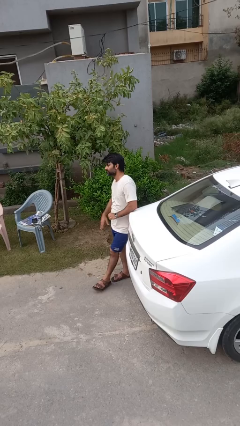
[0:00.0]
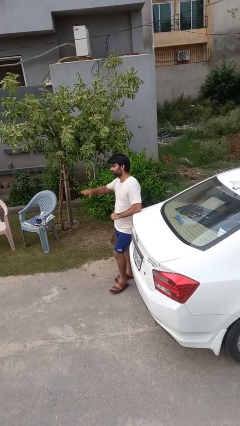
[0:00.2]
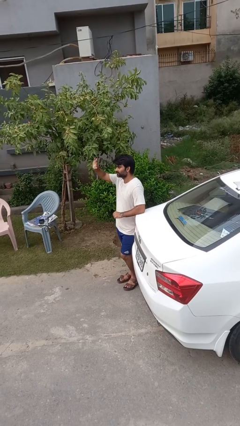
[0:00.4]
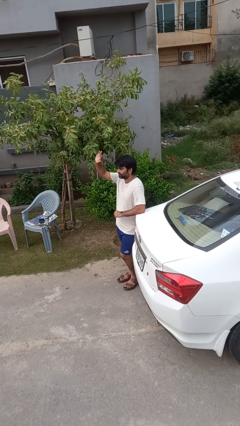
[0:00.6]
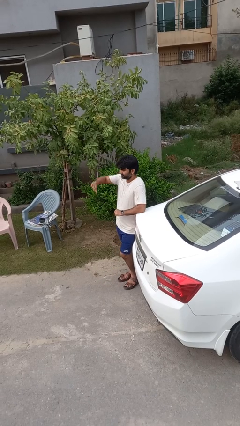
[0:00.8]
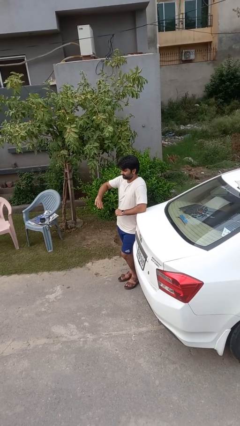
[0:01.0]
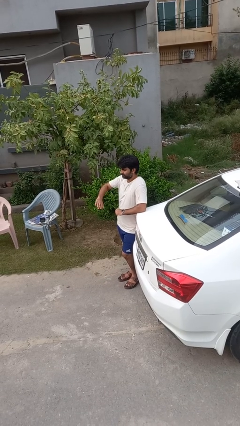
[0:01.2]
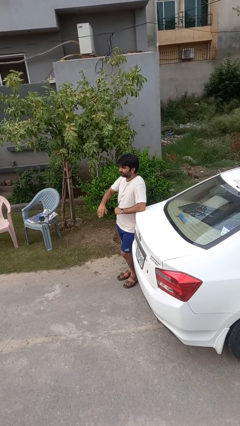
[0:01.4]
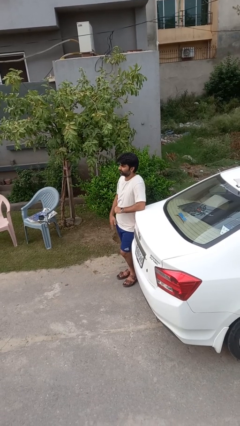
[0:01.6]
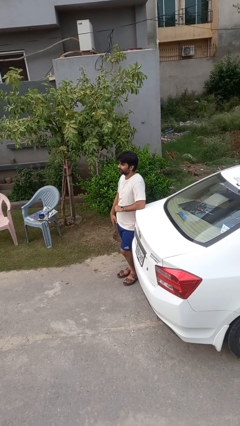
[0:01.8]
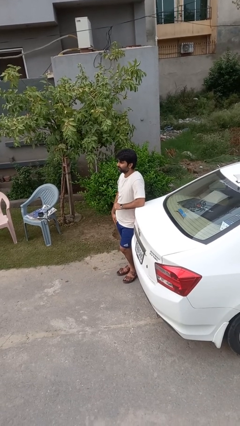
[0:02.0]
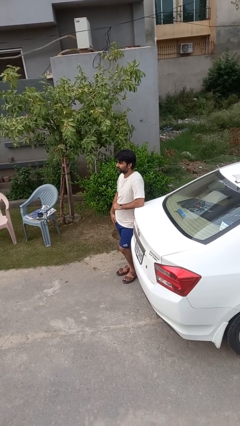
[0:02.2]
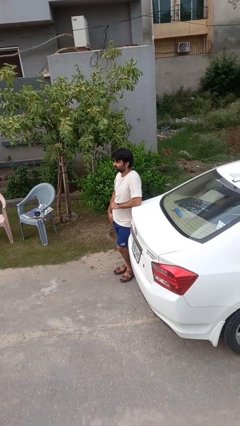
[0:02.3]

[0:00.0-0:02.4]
person gestures swipe down

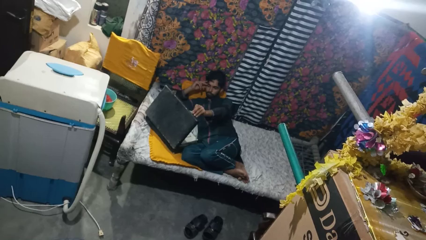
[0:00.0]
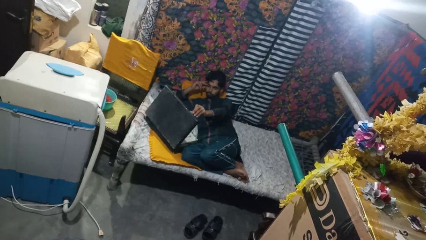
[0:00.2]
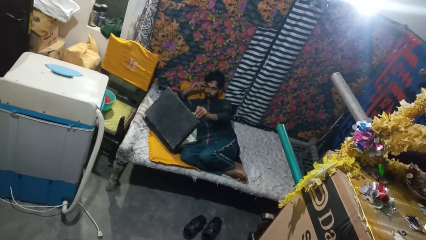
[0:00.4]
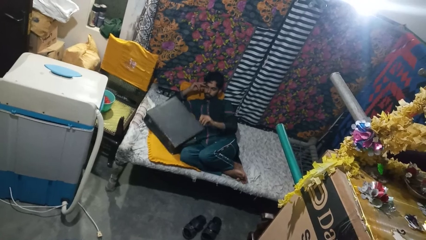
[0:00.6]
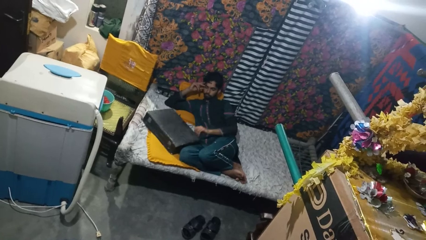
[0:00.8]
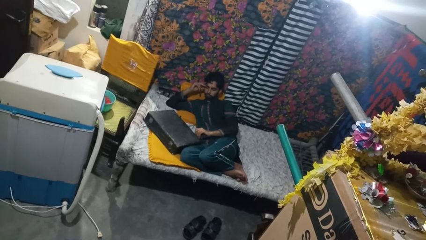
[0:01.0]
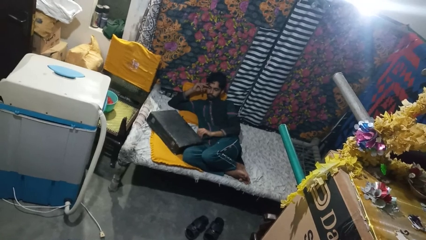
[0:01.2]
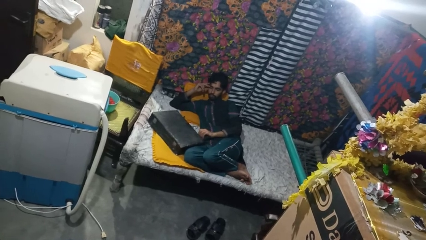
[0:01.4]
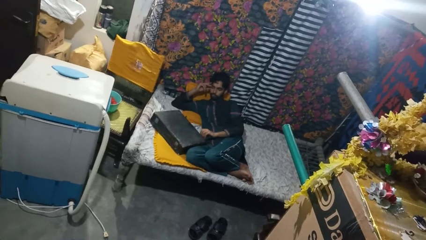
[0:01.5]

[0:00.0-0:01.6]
person closes suitcase

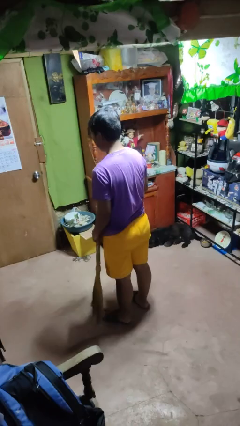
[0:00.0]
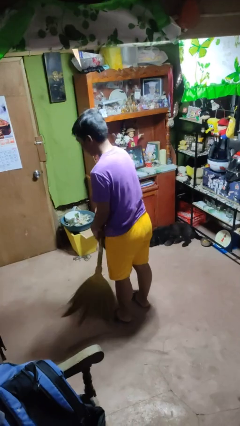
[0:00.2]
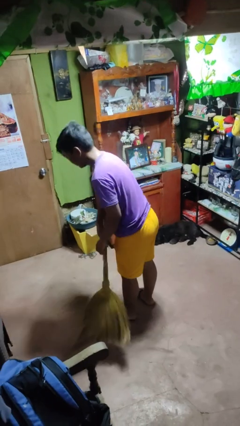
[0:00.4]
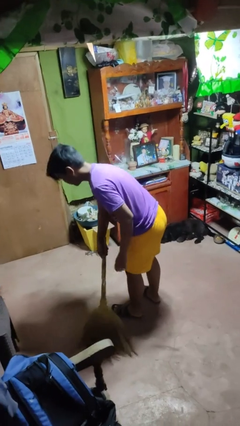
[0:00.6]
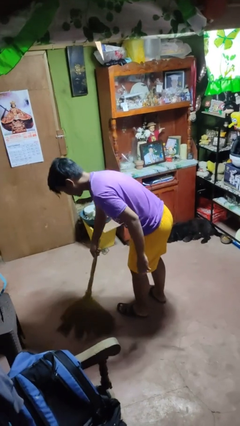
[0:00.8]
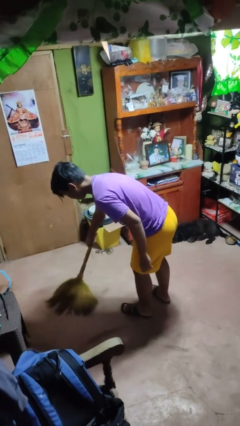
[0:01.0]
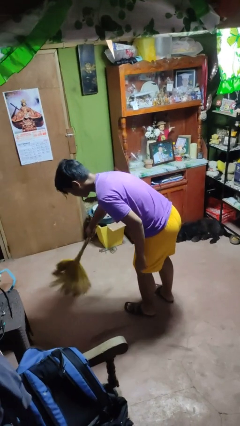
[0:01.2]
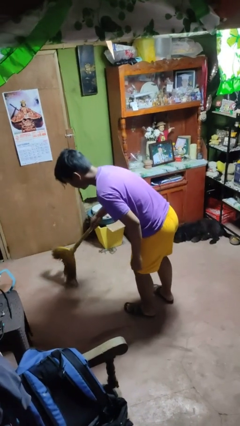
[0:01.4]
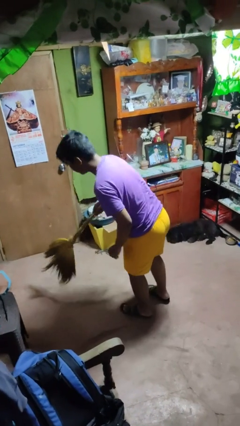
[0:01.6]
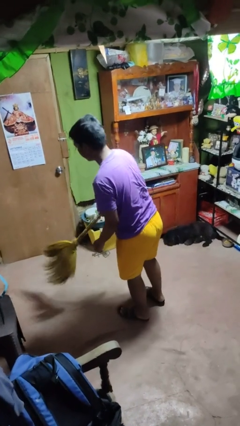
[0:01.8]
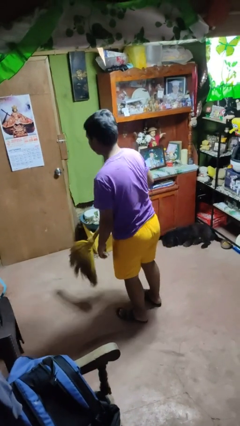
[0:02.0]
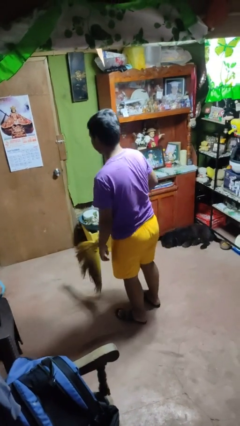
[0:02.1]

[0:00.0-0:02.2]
person sweeps floor

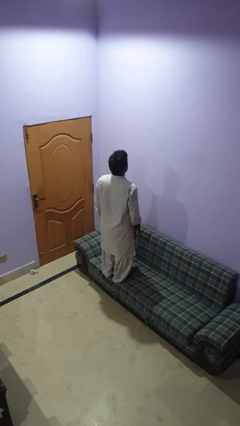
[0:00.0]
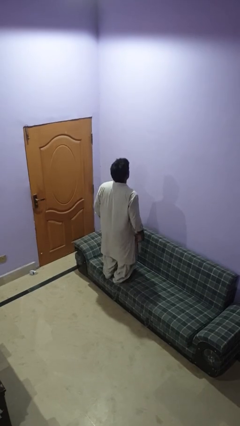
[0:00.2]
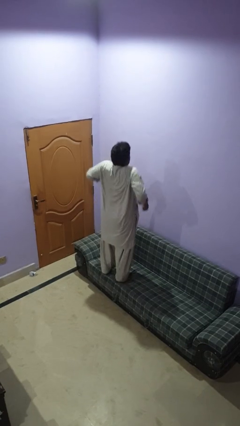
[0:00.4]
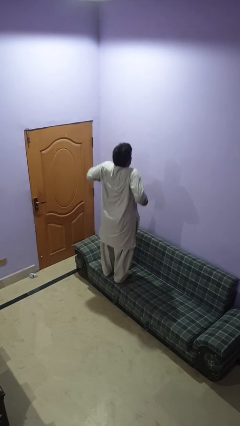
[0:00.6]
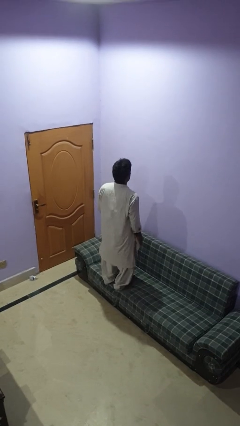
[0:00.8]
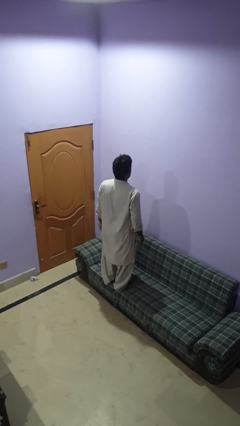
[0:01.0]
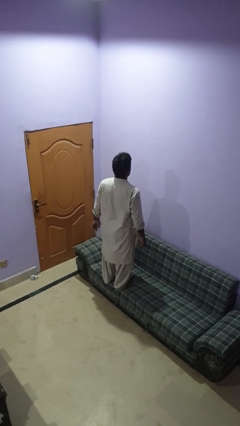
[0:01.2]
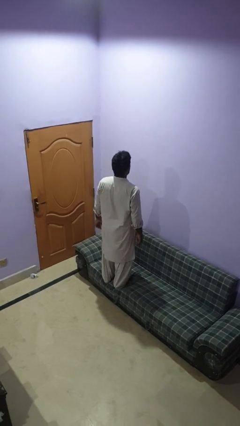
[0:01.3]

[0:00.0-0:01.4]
person jumps on couch

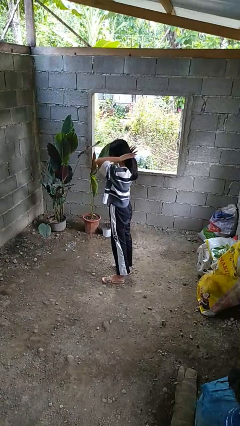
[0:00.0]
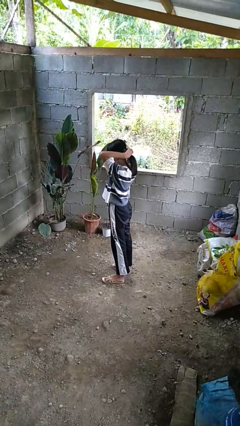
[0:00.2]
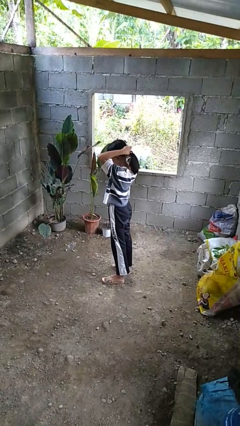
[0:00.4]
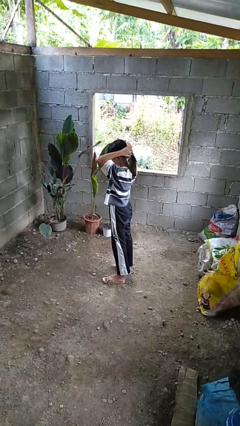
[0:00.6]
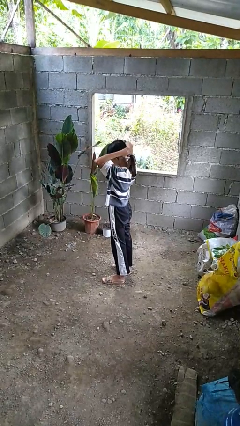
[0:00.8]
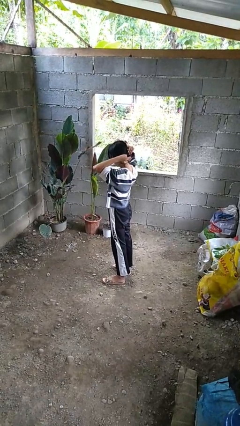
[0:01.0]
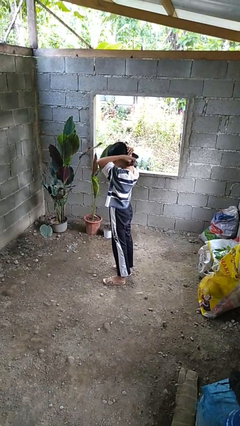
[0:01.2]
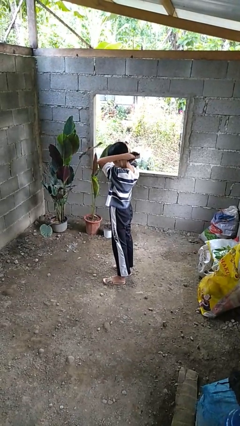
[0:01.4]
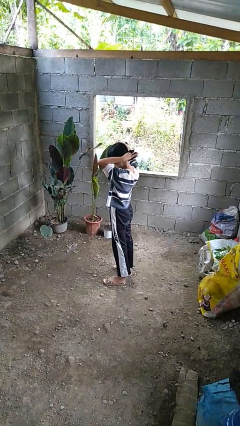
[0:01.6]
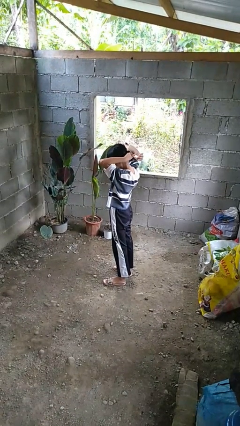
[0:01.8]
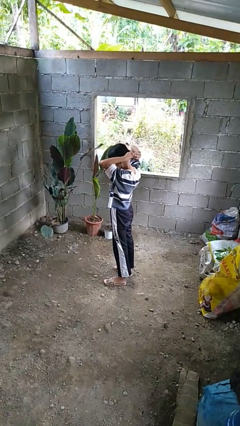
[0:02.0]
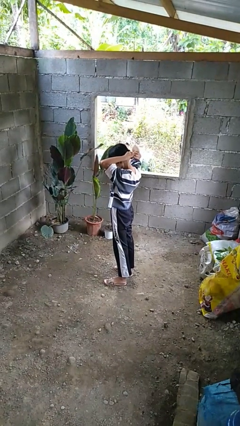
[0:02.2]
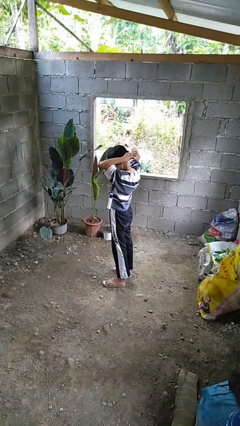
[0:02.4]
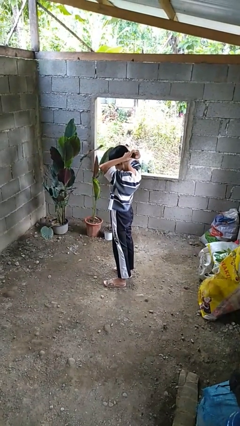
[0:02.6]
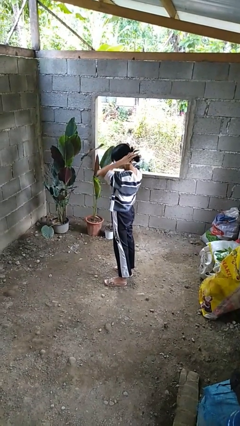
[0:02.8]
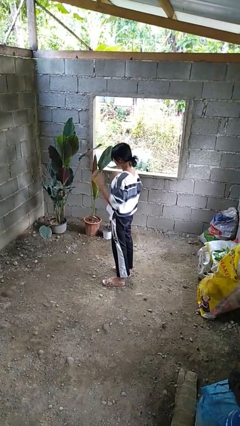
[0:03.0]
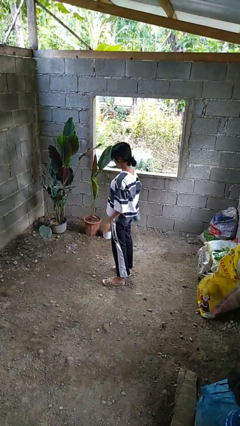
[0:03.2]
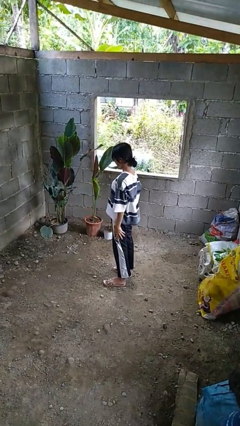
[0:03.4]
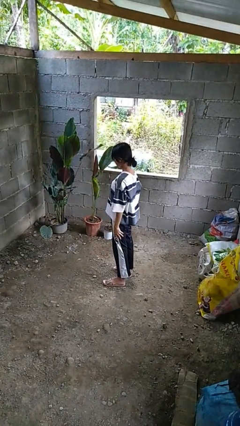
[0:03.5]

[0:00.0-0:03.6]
person puts hair in ponytail

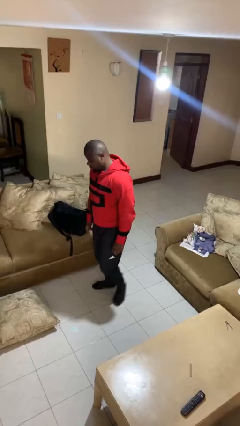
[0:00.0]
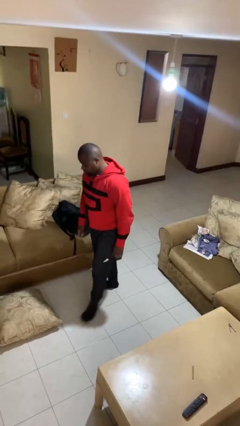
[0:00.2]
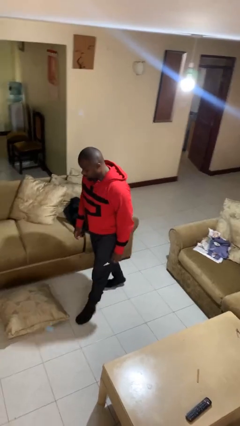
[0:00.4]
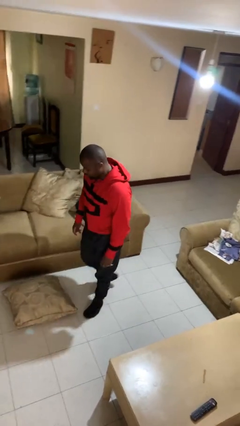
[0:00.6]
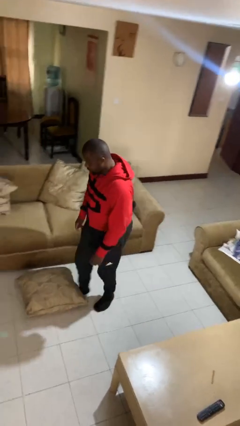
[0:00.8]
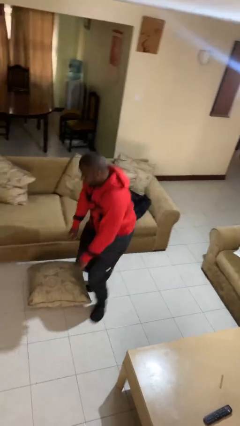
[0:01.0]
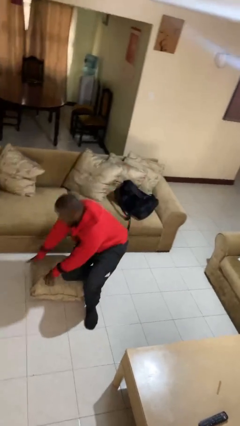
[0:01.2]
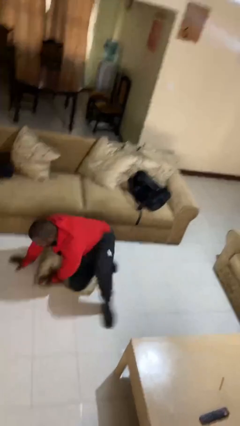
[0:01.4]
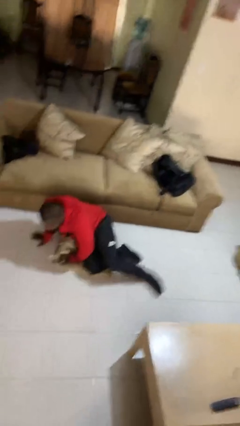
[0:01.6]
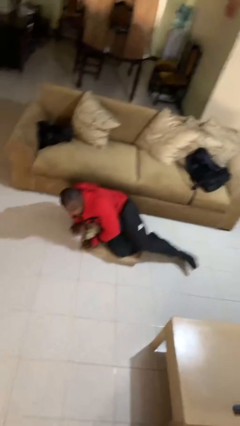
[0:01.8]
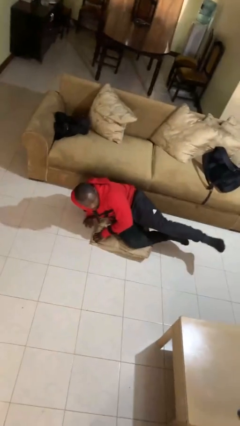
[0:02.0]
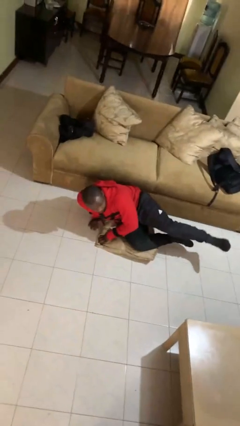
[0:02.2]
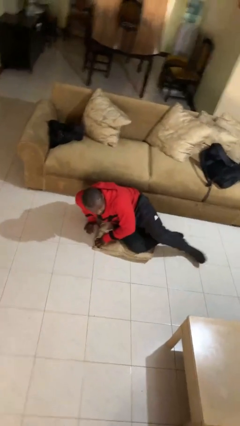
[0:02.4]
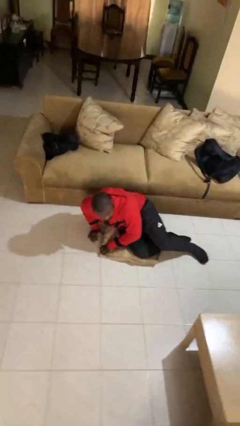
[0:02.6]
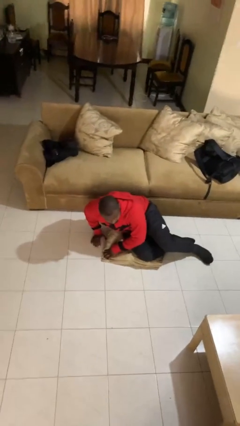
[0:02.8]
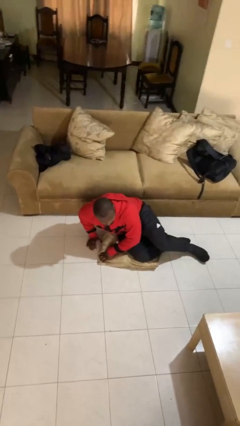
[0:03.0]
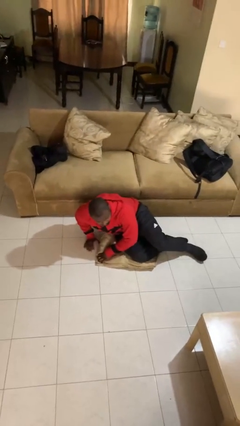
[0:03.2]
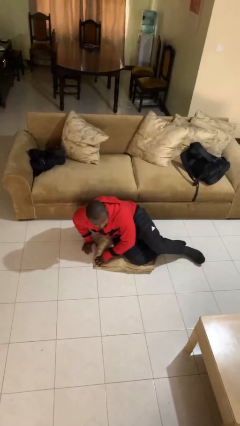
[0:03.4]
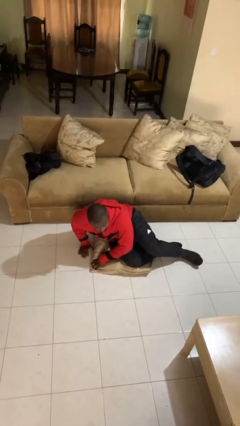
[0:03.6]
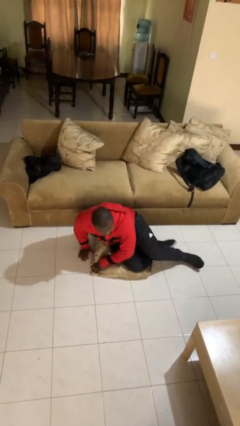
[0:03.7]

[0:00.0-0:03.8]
person trips on object on floor

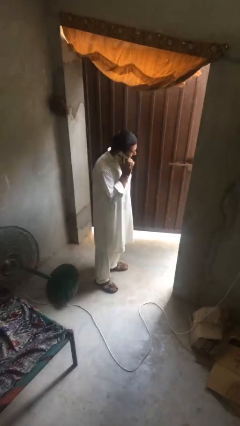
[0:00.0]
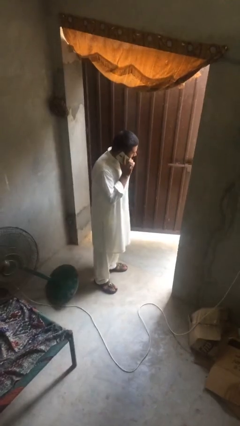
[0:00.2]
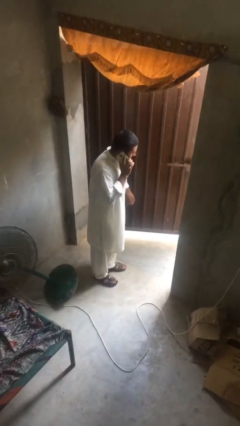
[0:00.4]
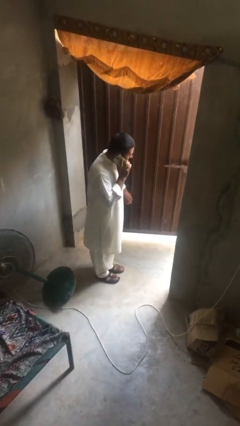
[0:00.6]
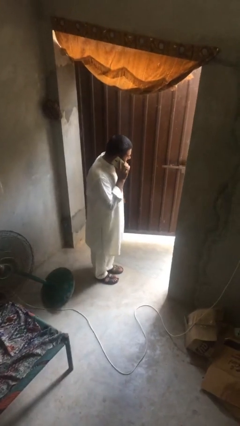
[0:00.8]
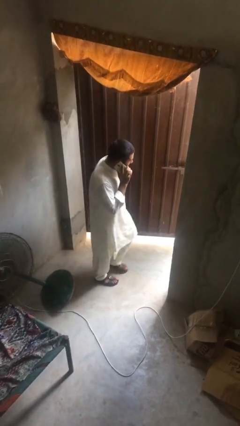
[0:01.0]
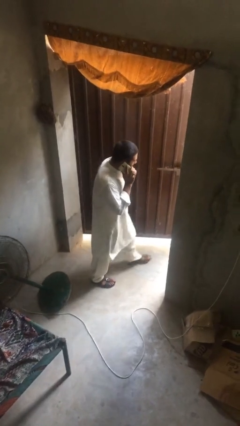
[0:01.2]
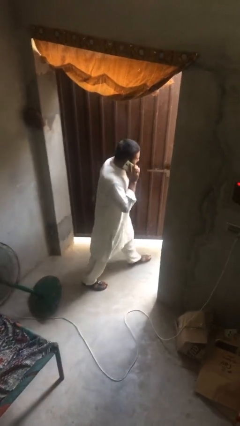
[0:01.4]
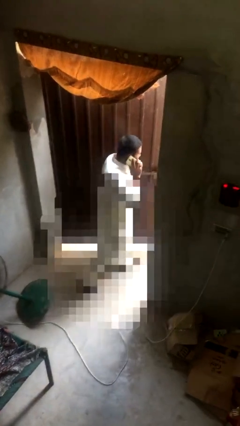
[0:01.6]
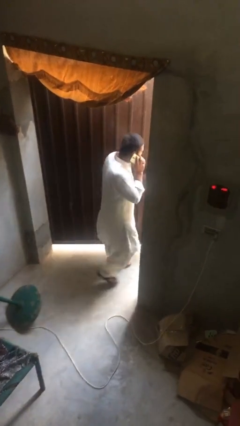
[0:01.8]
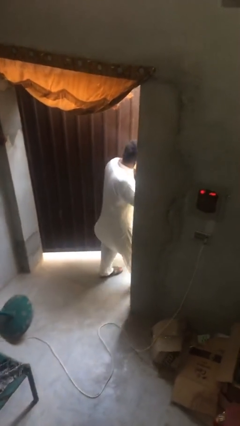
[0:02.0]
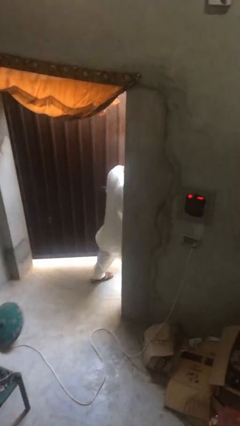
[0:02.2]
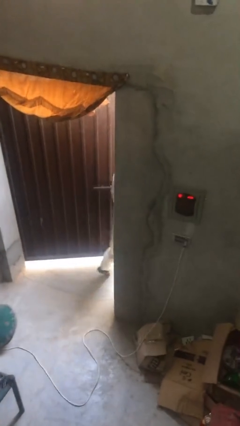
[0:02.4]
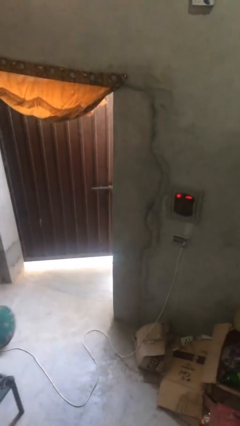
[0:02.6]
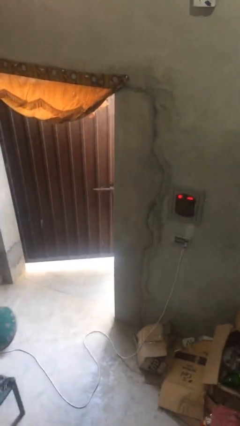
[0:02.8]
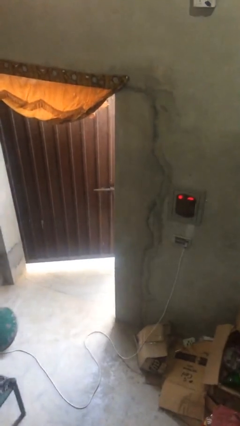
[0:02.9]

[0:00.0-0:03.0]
person exits scene through structure
